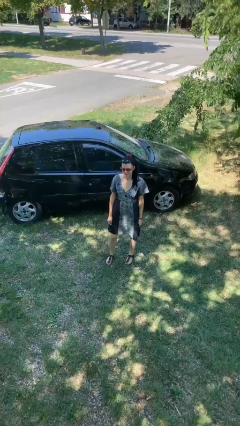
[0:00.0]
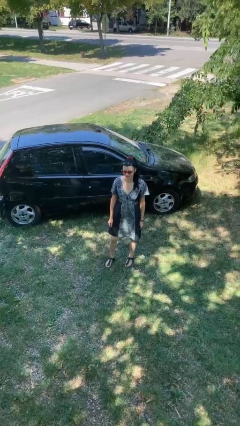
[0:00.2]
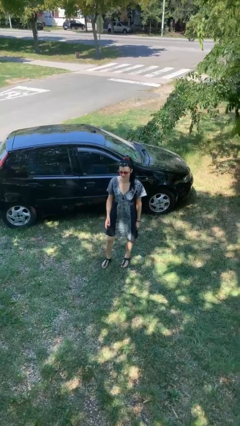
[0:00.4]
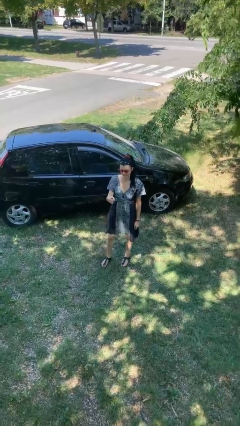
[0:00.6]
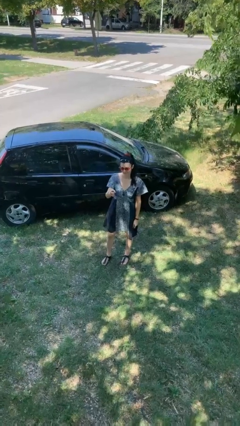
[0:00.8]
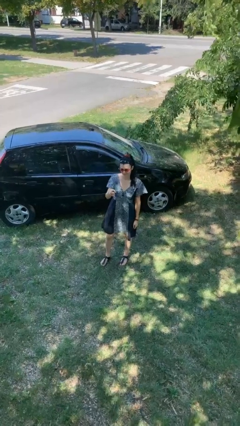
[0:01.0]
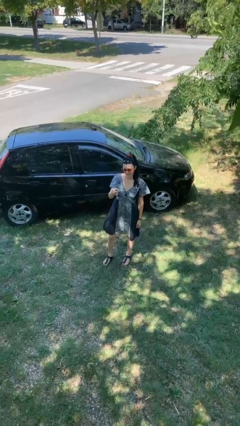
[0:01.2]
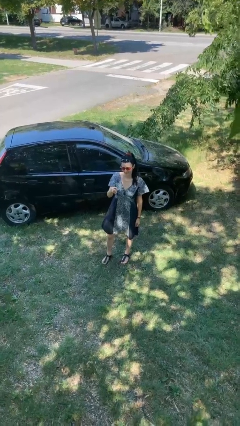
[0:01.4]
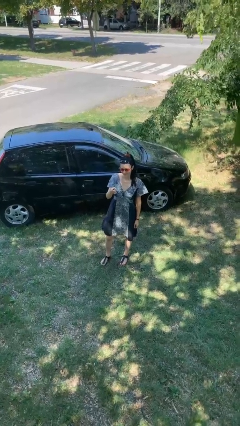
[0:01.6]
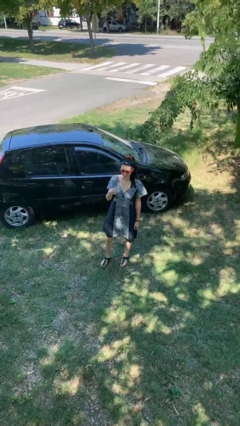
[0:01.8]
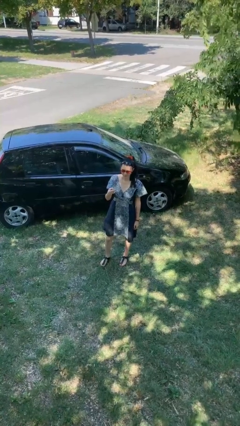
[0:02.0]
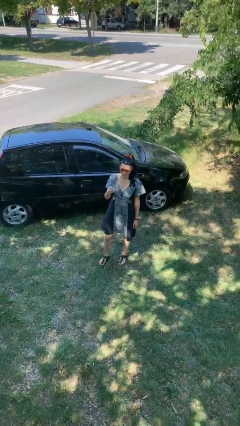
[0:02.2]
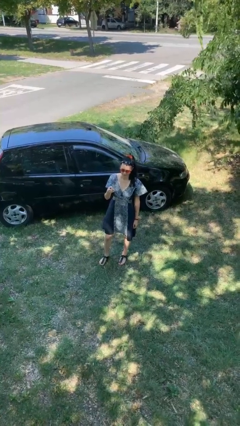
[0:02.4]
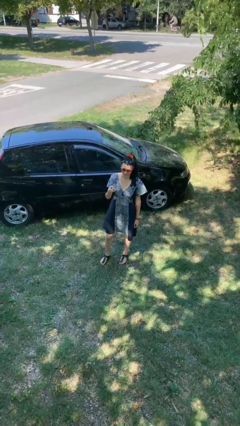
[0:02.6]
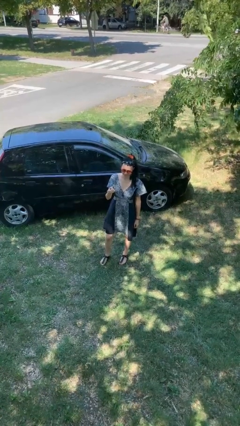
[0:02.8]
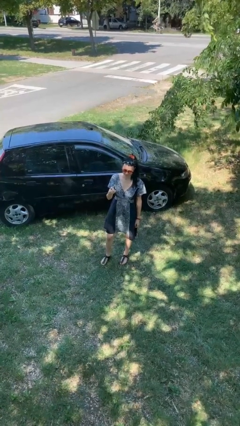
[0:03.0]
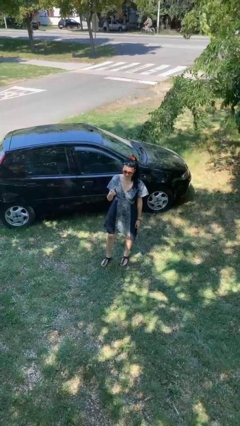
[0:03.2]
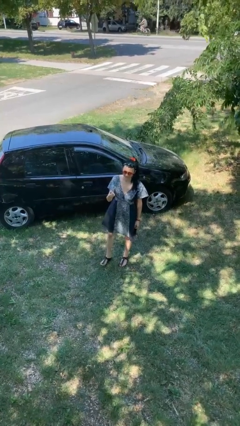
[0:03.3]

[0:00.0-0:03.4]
person points at person

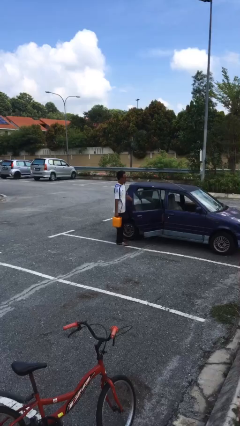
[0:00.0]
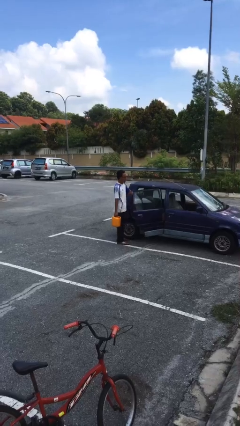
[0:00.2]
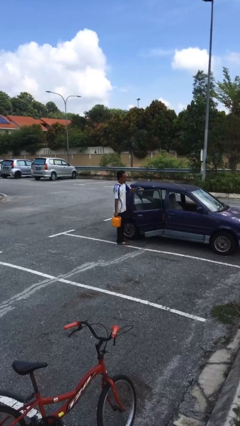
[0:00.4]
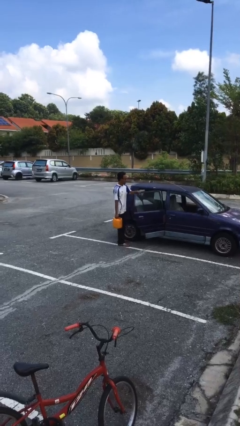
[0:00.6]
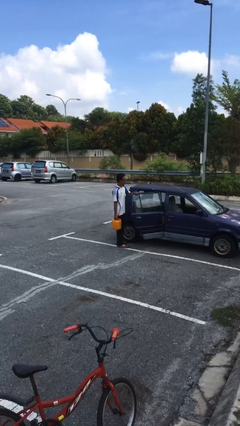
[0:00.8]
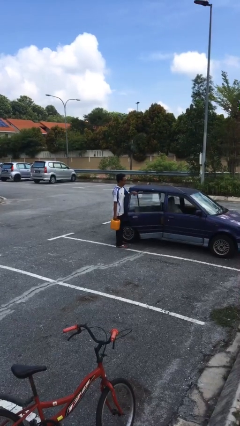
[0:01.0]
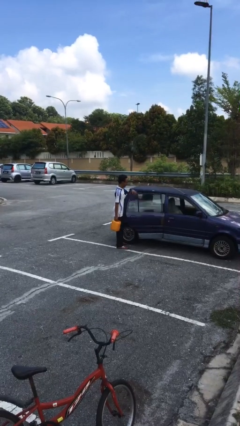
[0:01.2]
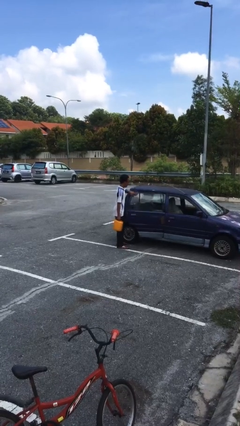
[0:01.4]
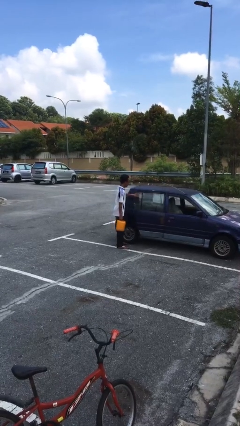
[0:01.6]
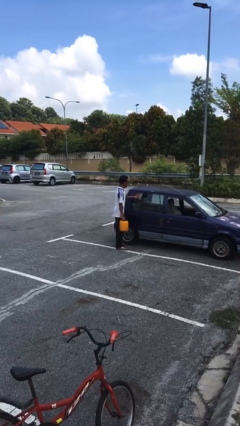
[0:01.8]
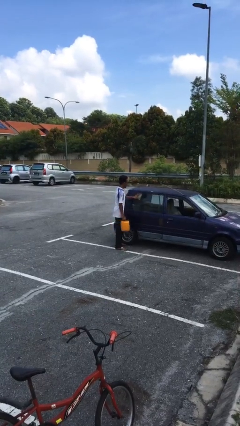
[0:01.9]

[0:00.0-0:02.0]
person closes car door

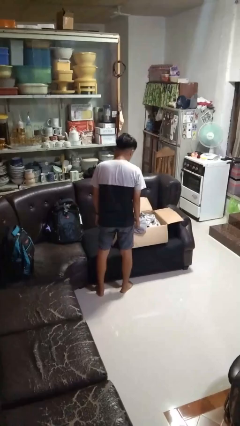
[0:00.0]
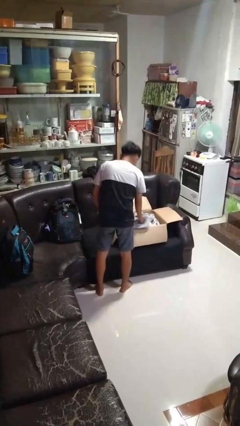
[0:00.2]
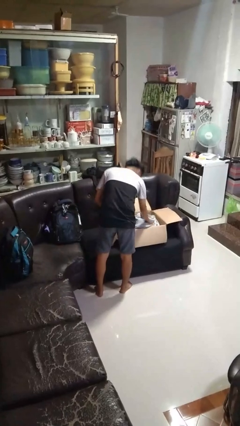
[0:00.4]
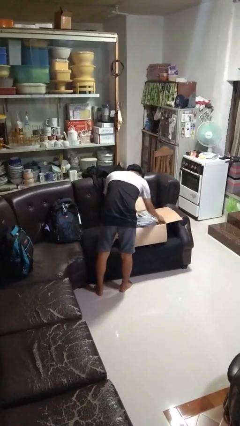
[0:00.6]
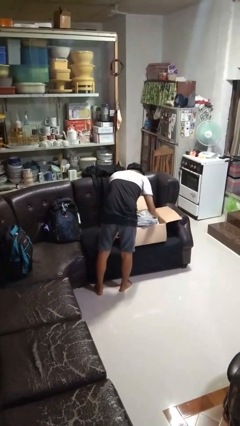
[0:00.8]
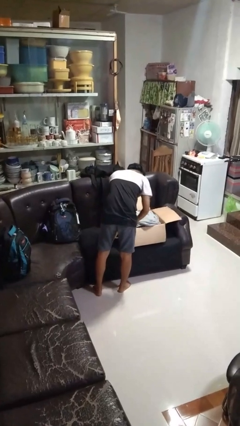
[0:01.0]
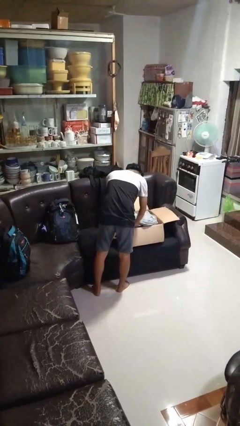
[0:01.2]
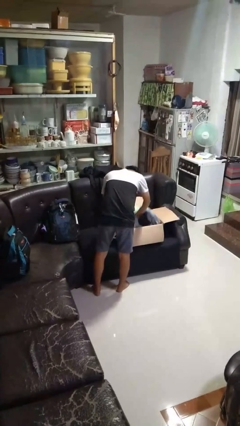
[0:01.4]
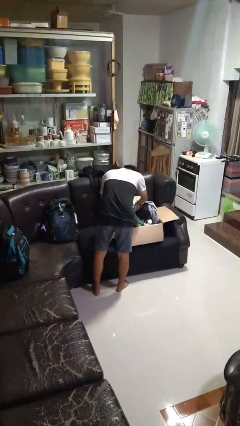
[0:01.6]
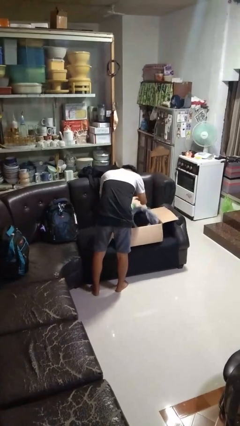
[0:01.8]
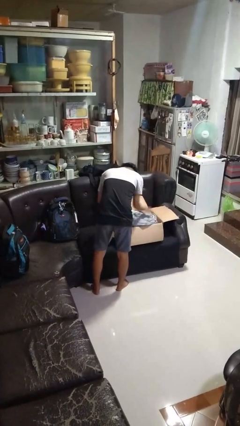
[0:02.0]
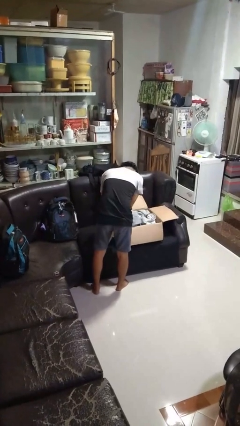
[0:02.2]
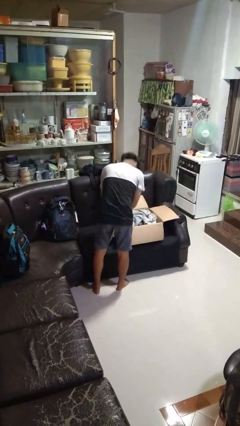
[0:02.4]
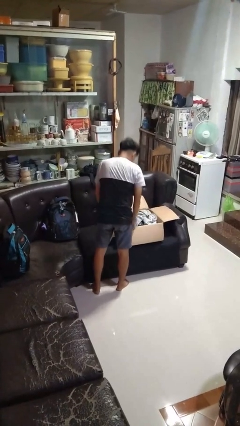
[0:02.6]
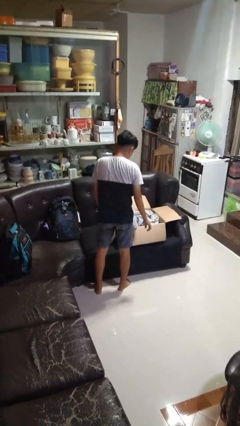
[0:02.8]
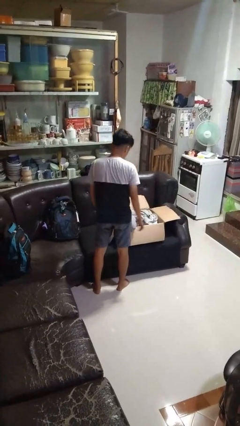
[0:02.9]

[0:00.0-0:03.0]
person searches in box

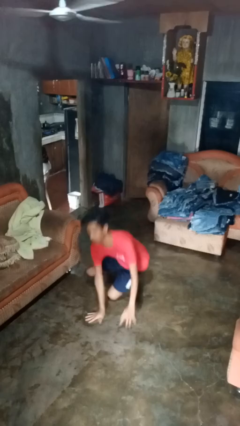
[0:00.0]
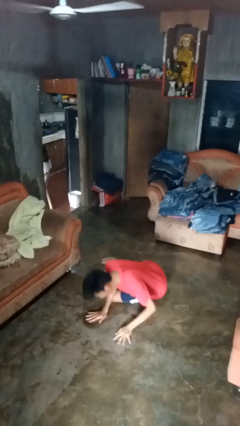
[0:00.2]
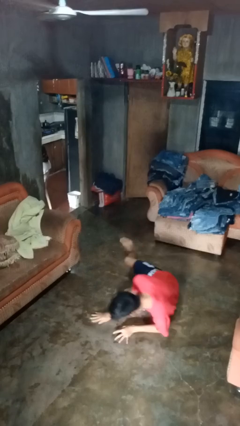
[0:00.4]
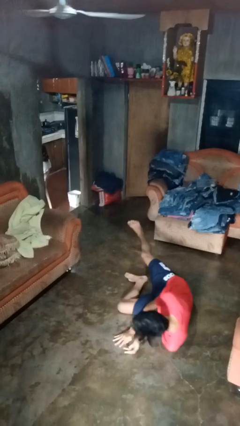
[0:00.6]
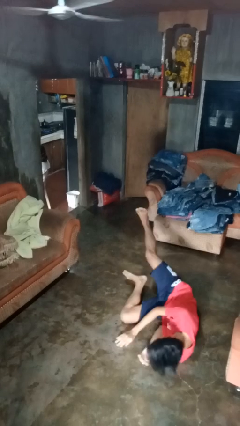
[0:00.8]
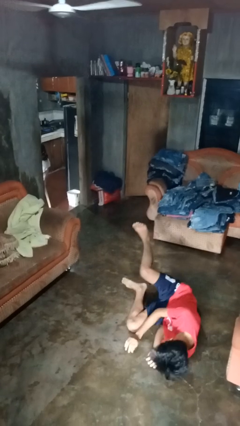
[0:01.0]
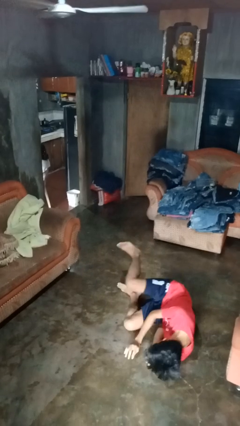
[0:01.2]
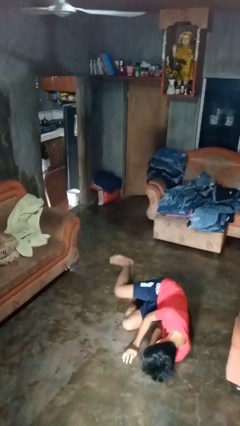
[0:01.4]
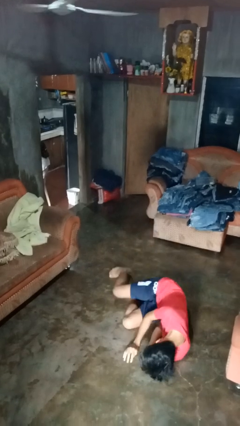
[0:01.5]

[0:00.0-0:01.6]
person falls while standing

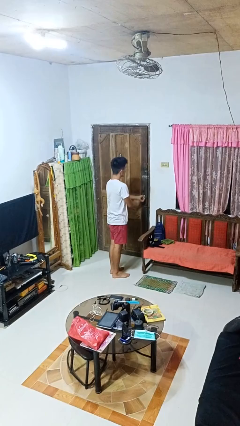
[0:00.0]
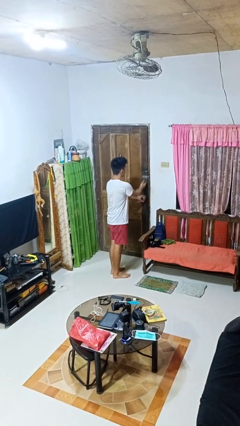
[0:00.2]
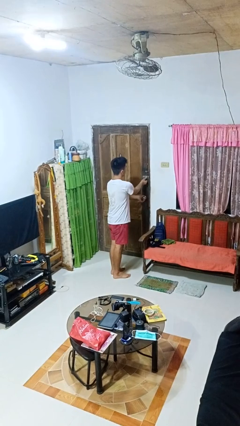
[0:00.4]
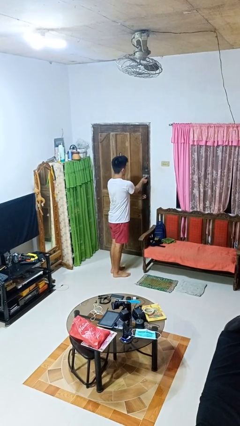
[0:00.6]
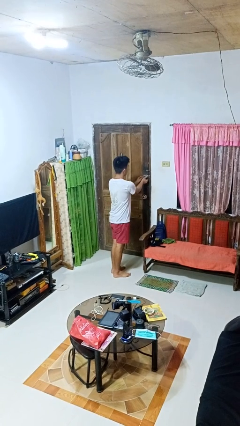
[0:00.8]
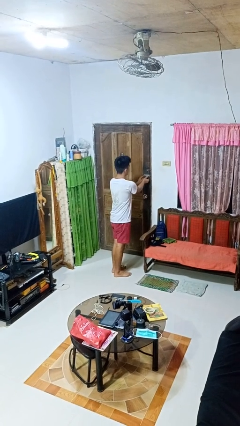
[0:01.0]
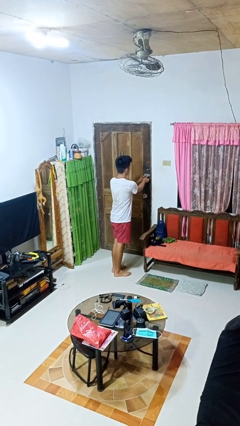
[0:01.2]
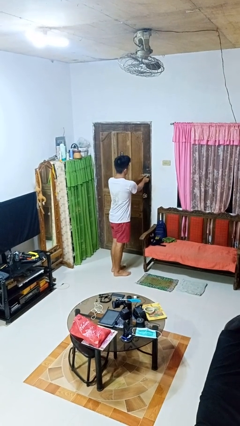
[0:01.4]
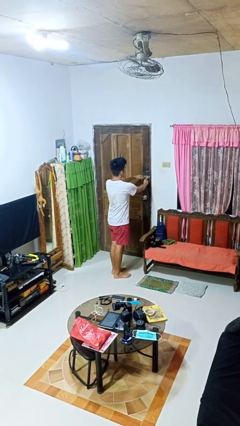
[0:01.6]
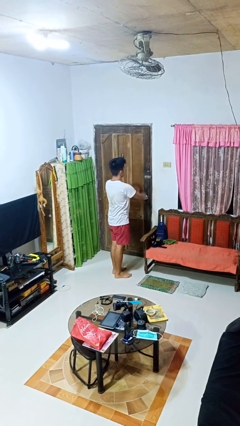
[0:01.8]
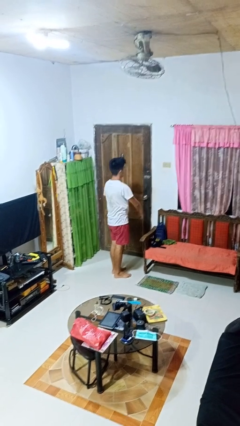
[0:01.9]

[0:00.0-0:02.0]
person locks door with keys

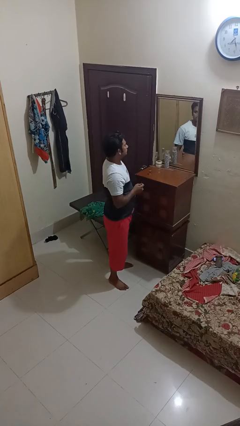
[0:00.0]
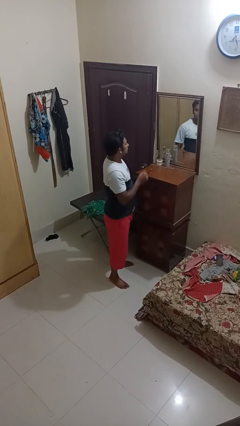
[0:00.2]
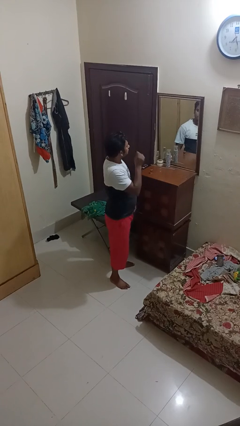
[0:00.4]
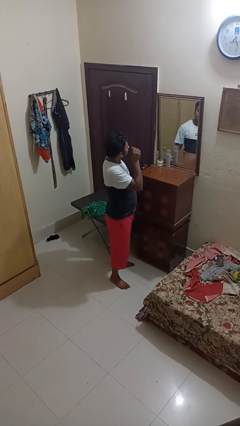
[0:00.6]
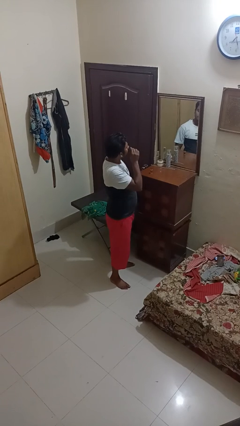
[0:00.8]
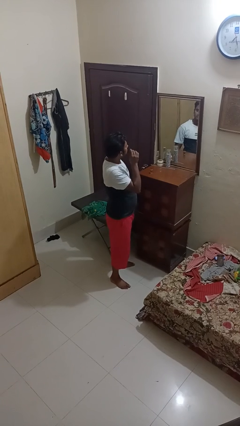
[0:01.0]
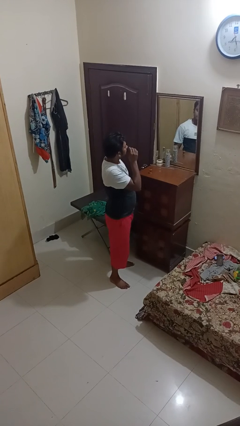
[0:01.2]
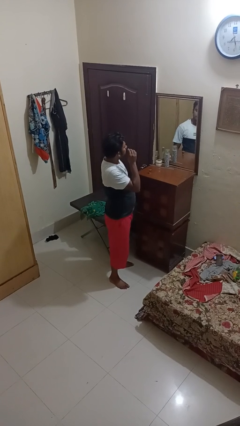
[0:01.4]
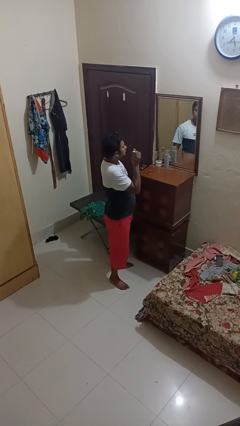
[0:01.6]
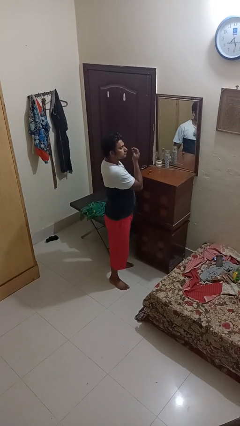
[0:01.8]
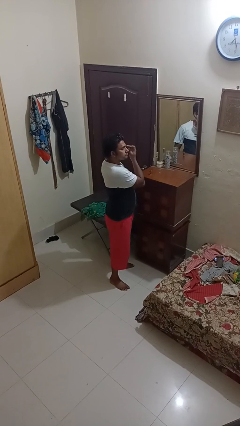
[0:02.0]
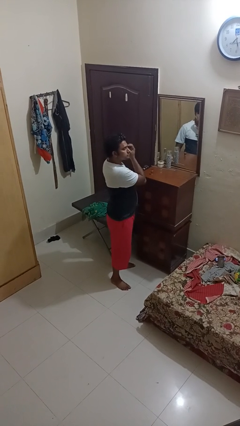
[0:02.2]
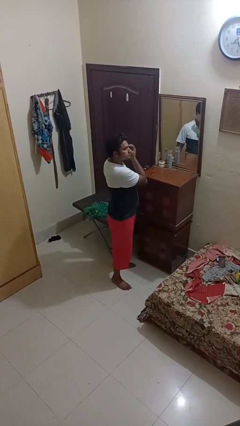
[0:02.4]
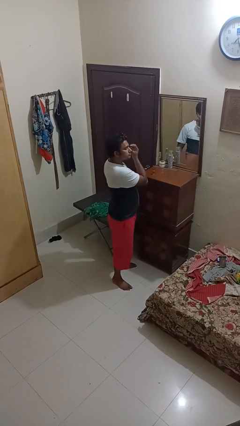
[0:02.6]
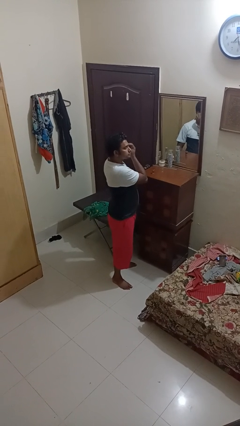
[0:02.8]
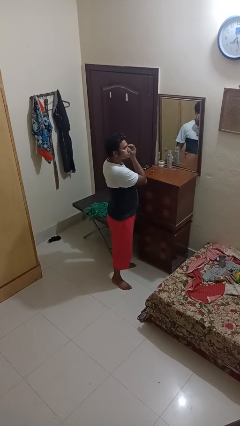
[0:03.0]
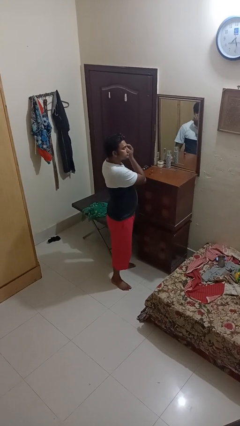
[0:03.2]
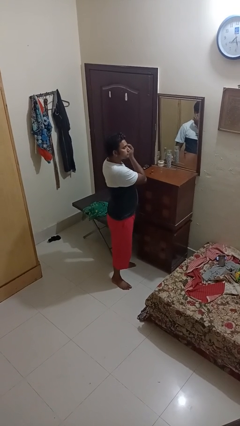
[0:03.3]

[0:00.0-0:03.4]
person applies eye makeup

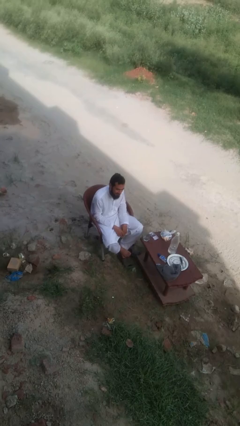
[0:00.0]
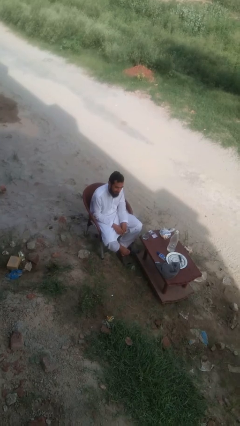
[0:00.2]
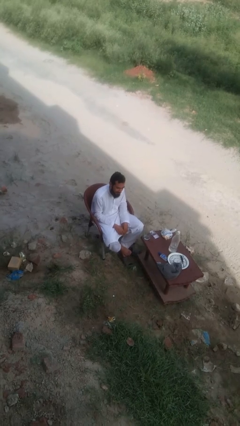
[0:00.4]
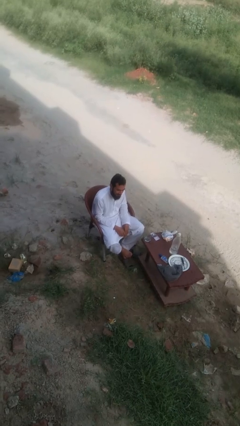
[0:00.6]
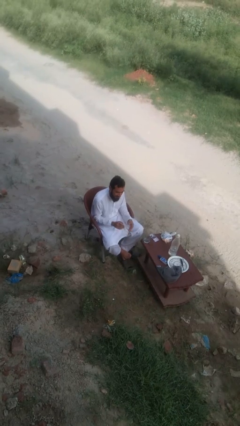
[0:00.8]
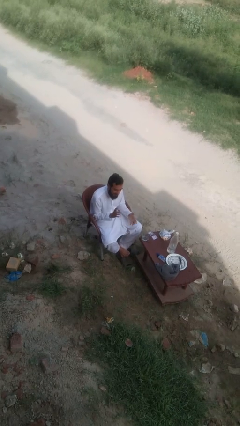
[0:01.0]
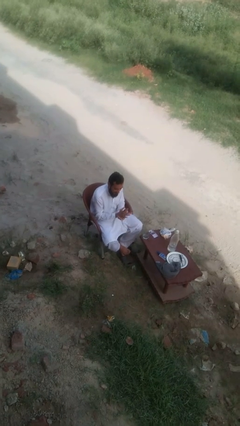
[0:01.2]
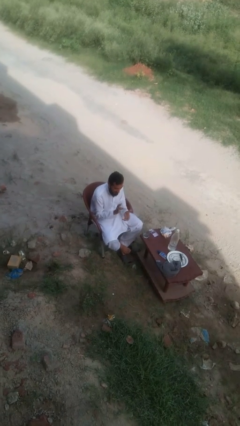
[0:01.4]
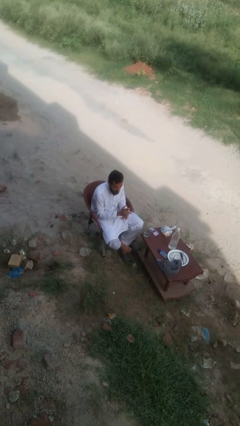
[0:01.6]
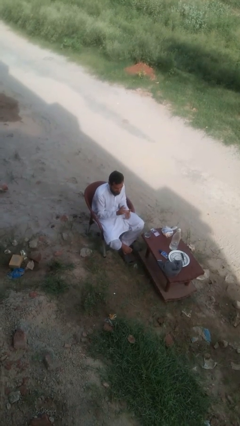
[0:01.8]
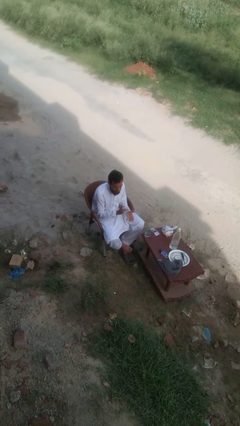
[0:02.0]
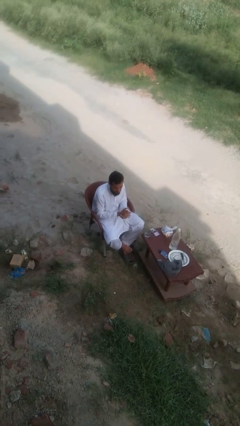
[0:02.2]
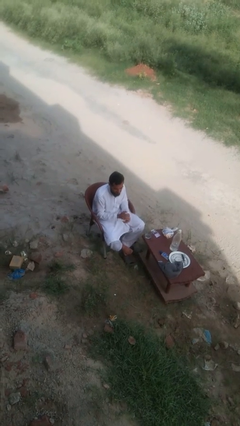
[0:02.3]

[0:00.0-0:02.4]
person claps hands
